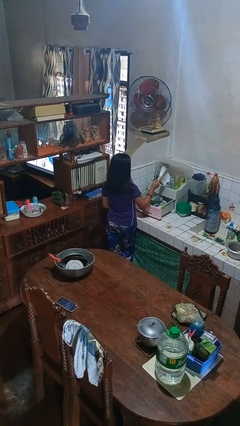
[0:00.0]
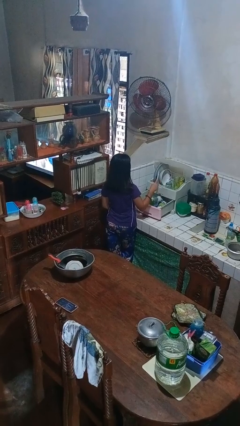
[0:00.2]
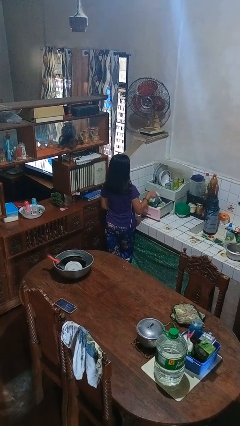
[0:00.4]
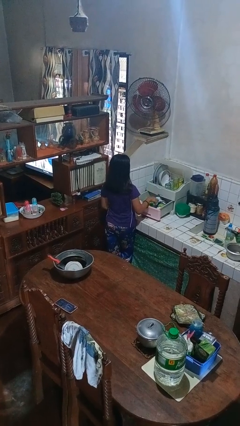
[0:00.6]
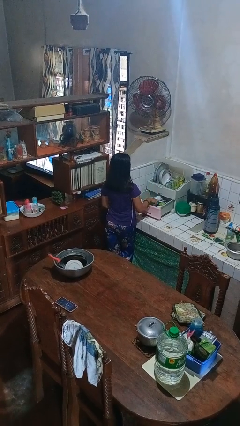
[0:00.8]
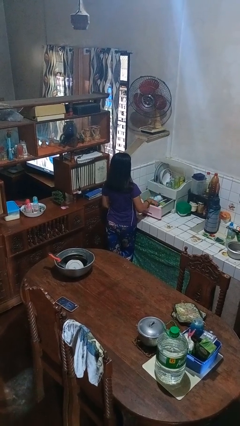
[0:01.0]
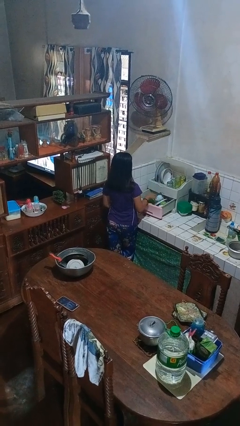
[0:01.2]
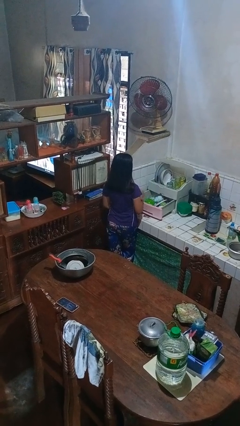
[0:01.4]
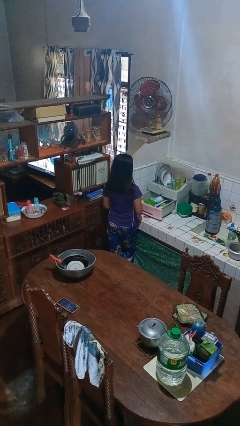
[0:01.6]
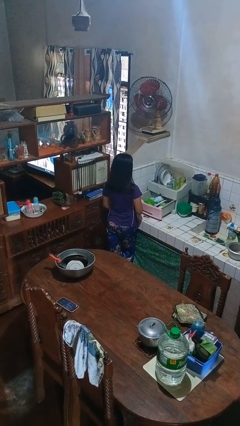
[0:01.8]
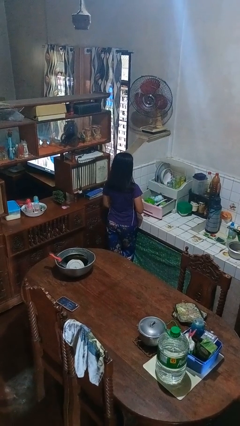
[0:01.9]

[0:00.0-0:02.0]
person puts object into kitchen drawer

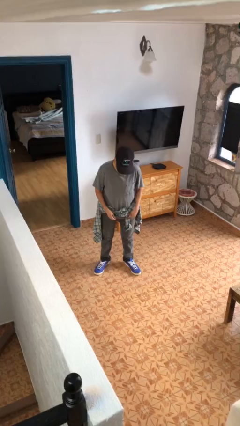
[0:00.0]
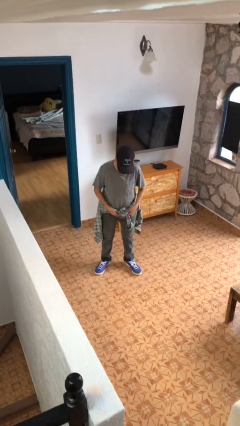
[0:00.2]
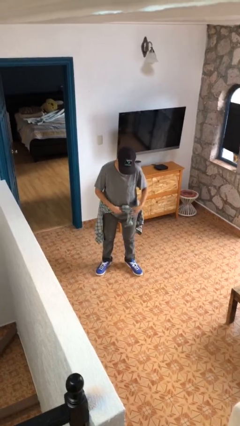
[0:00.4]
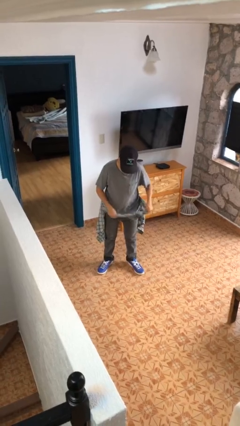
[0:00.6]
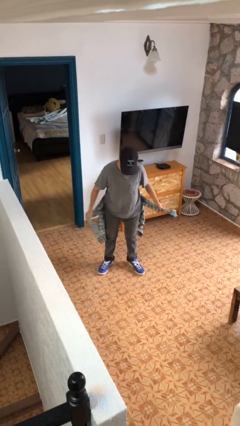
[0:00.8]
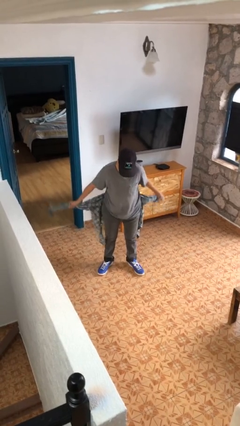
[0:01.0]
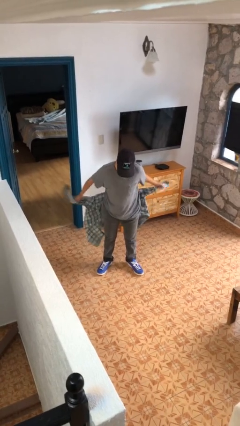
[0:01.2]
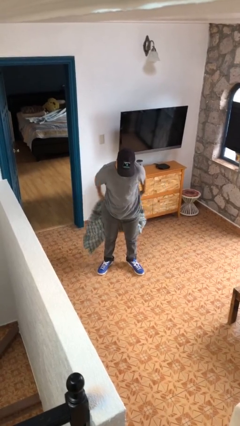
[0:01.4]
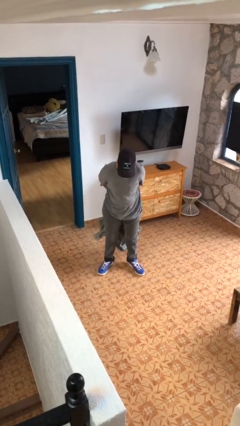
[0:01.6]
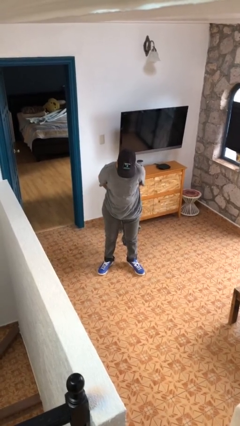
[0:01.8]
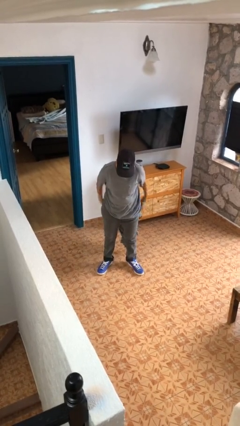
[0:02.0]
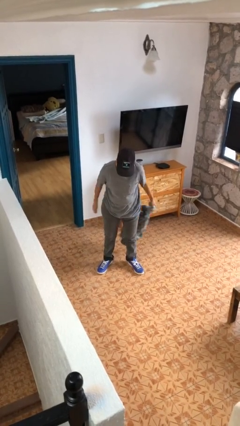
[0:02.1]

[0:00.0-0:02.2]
person unties jacket around waist

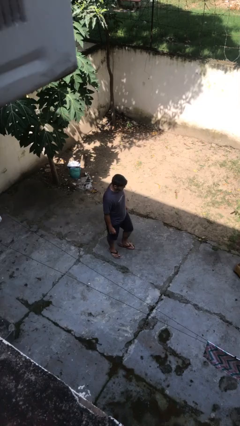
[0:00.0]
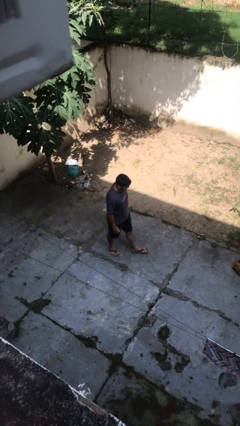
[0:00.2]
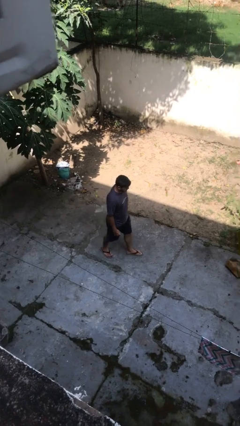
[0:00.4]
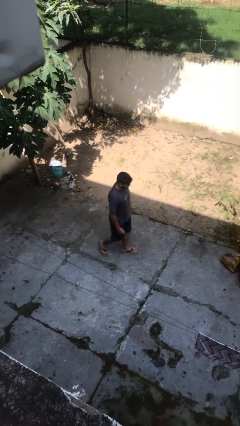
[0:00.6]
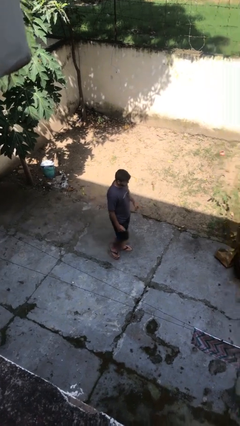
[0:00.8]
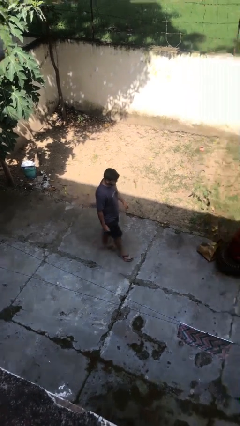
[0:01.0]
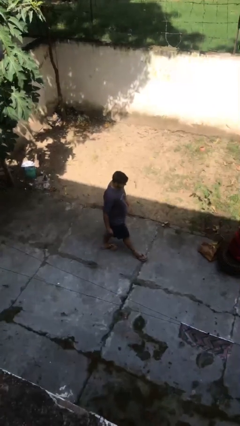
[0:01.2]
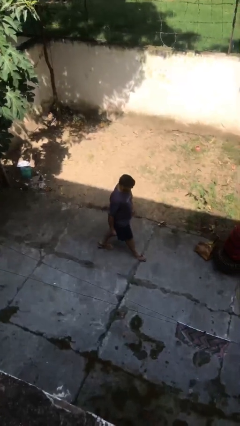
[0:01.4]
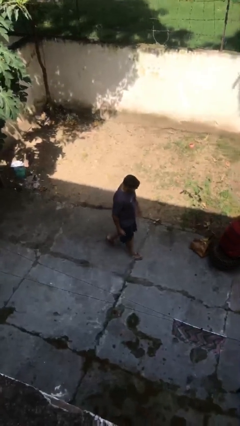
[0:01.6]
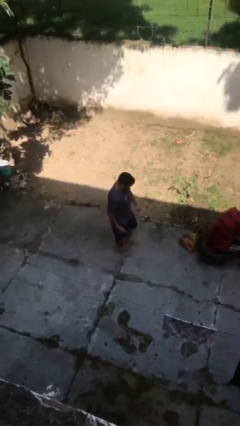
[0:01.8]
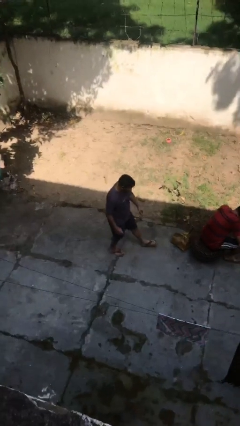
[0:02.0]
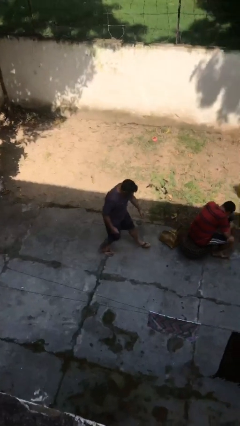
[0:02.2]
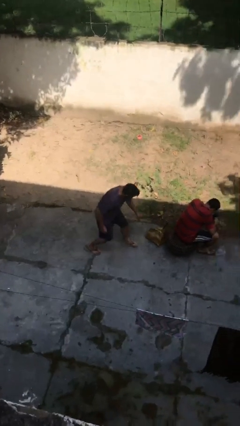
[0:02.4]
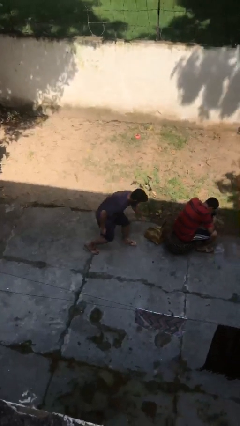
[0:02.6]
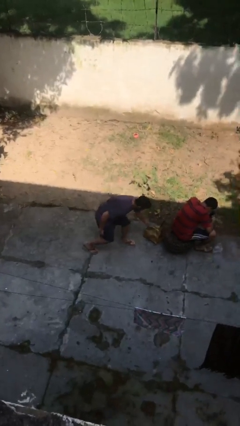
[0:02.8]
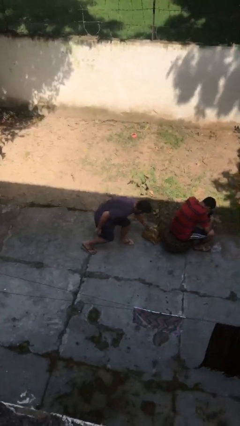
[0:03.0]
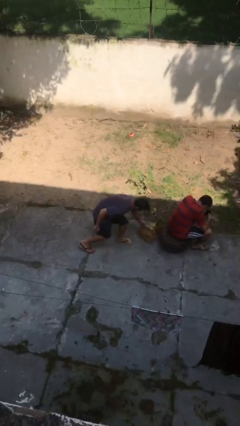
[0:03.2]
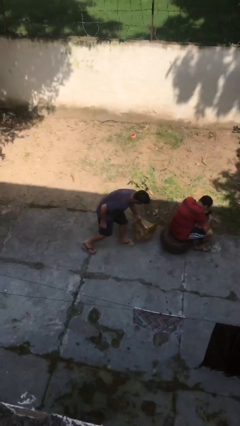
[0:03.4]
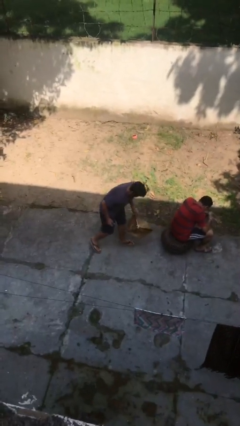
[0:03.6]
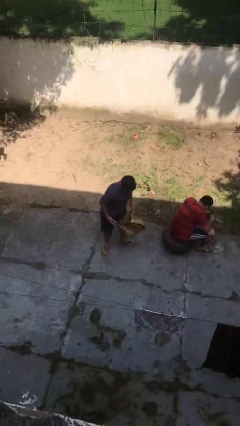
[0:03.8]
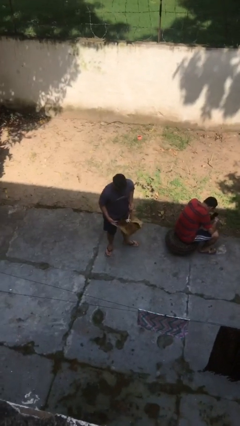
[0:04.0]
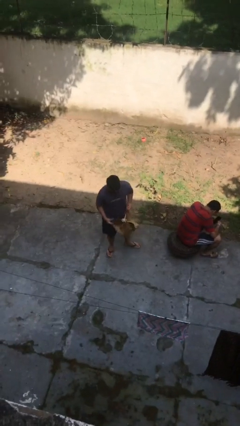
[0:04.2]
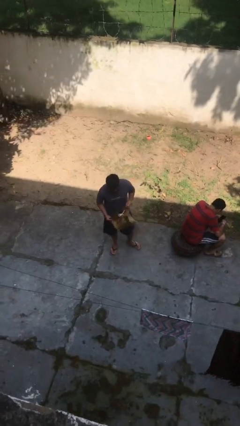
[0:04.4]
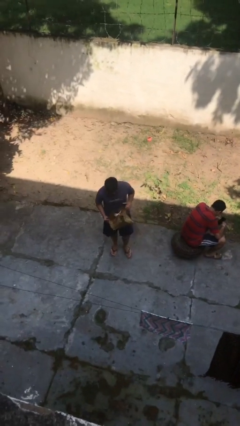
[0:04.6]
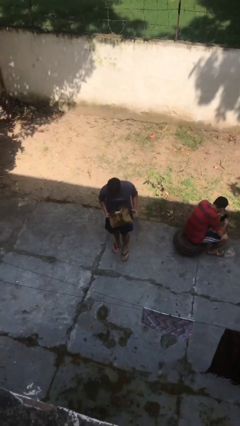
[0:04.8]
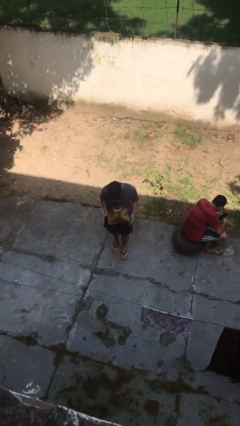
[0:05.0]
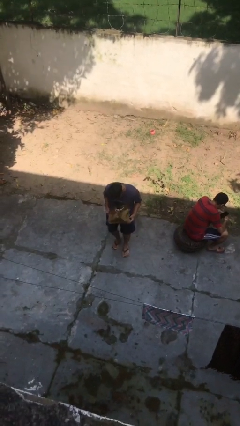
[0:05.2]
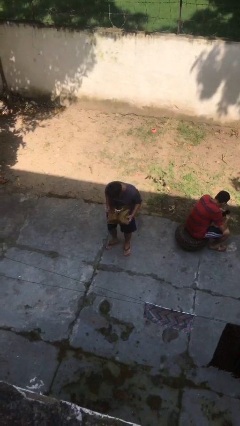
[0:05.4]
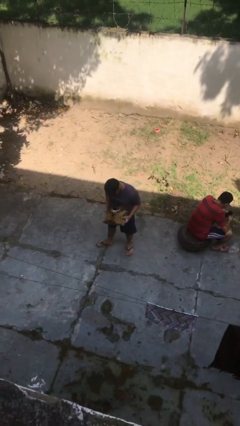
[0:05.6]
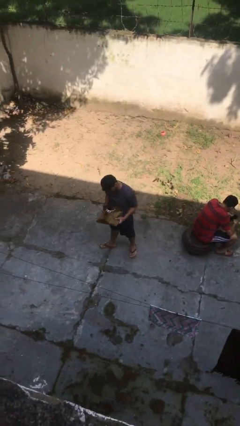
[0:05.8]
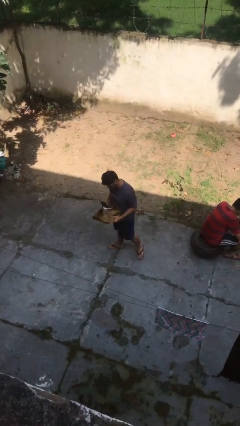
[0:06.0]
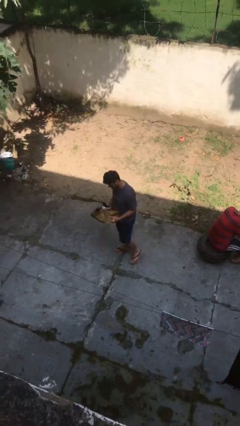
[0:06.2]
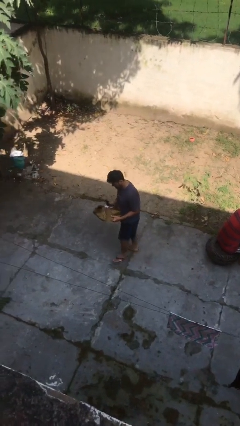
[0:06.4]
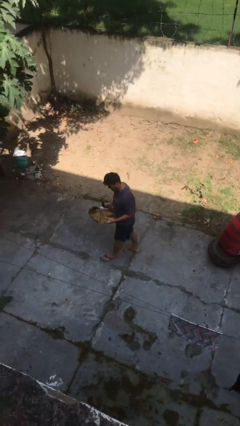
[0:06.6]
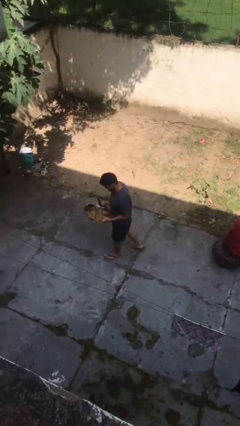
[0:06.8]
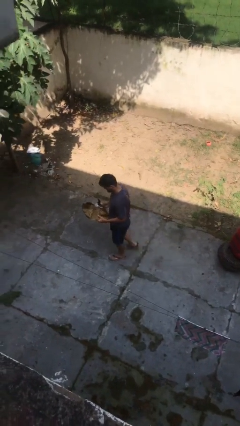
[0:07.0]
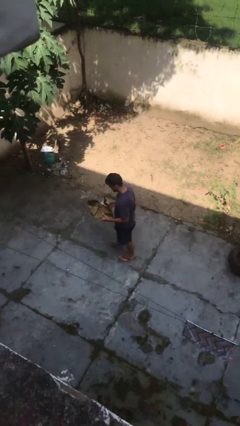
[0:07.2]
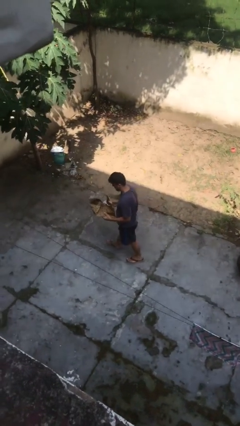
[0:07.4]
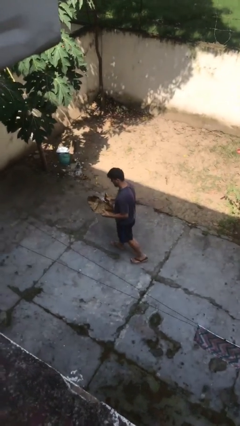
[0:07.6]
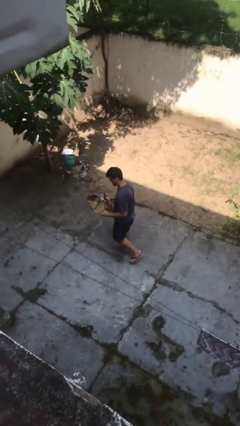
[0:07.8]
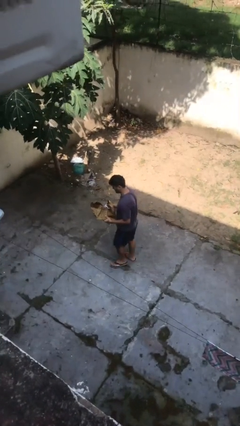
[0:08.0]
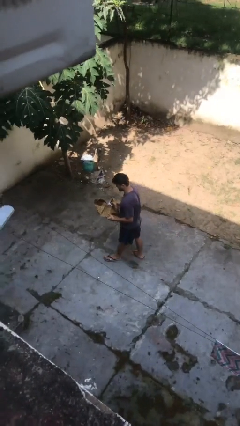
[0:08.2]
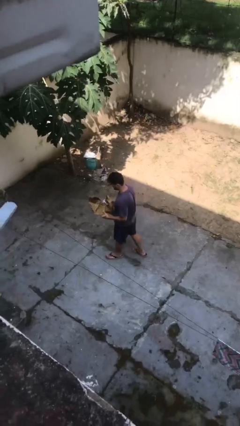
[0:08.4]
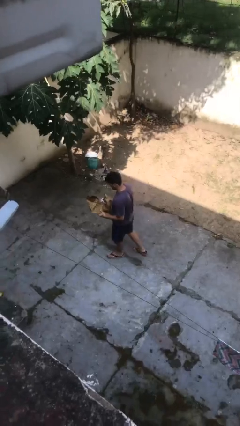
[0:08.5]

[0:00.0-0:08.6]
person steals object from person

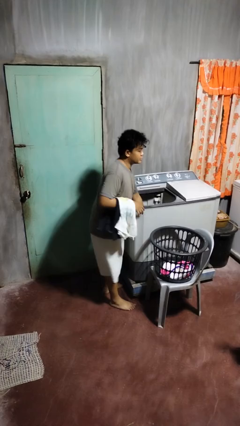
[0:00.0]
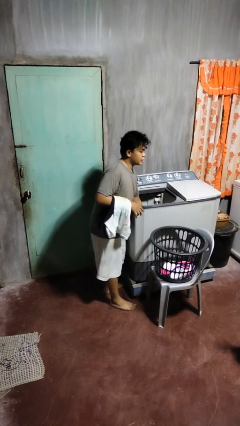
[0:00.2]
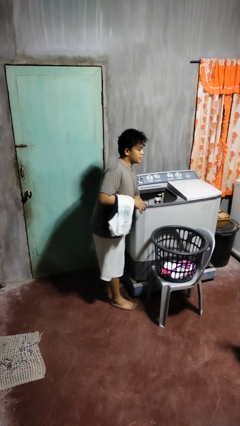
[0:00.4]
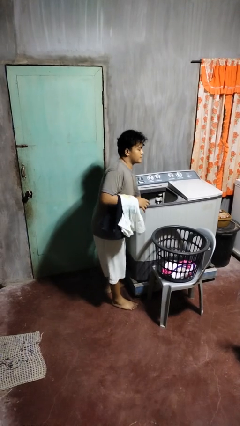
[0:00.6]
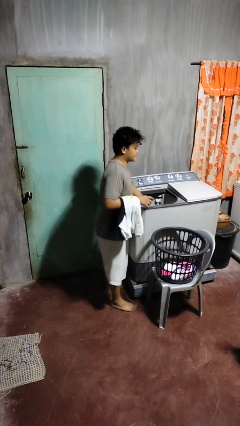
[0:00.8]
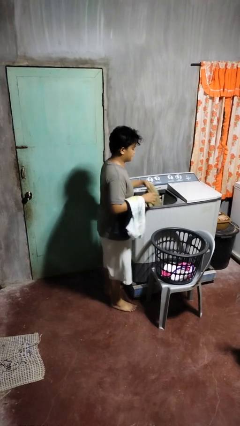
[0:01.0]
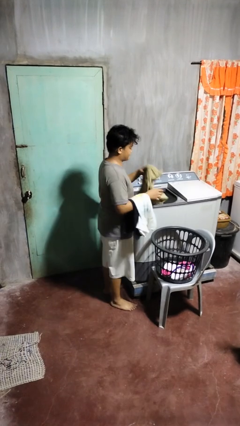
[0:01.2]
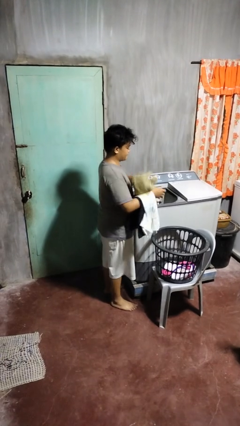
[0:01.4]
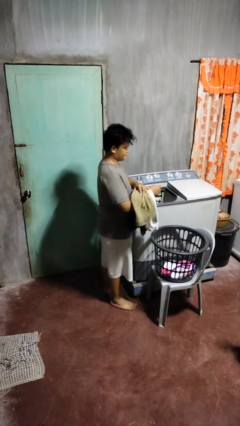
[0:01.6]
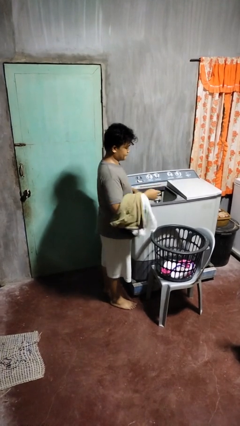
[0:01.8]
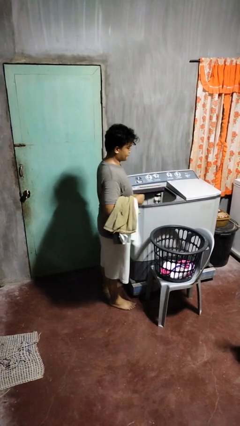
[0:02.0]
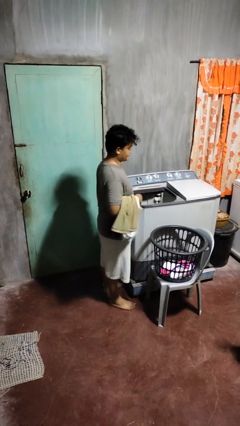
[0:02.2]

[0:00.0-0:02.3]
person unloads clotheswasher

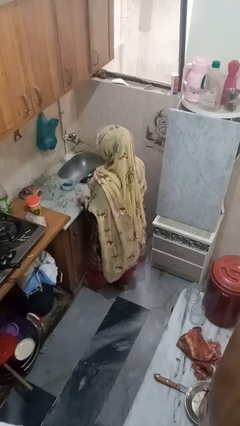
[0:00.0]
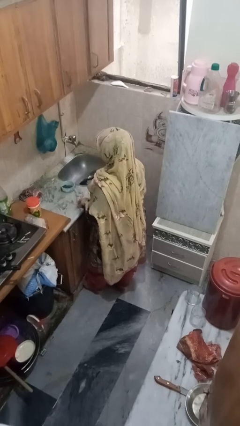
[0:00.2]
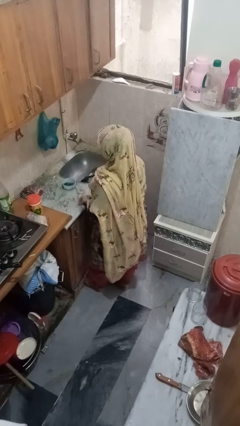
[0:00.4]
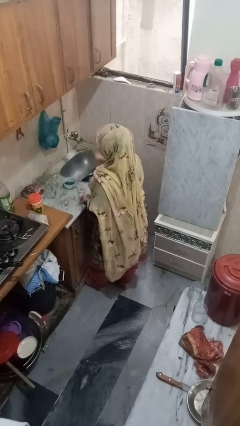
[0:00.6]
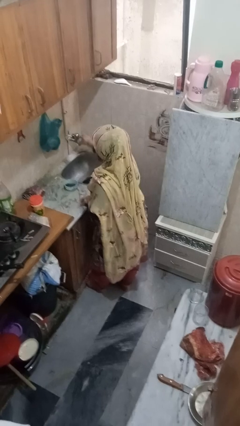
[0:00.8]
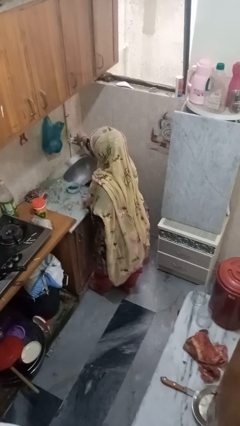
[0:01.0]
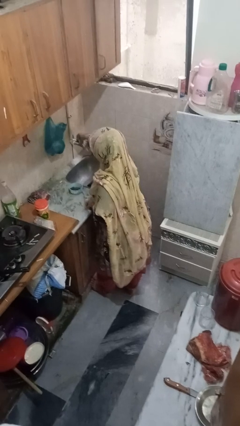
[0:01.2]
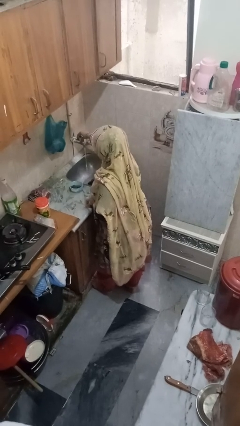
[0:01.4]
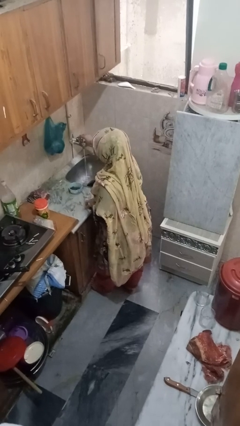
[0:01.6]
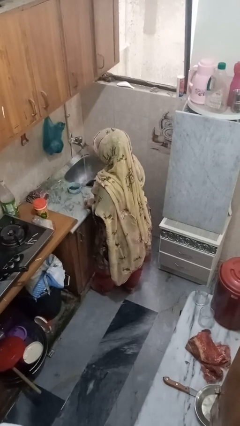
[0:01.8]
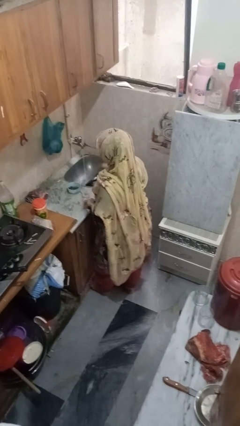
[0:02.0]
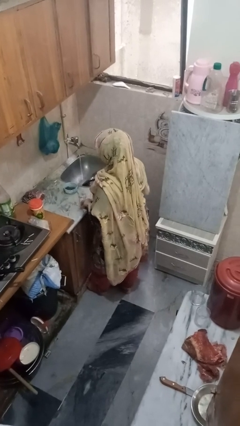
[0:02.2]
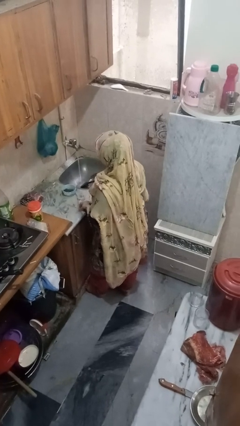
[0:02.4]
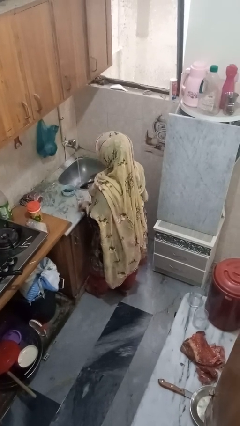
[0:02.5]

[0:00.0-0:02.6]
person turns on faucet
